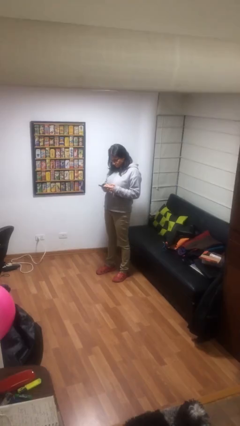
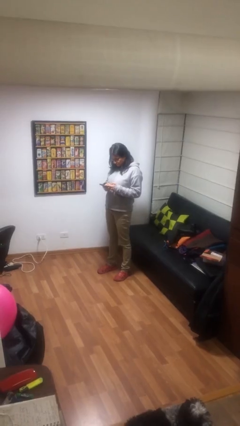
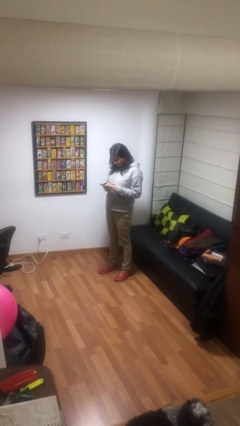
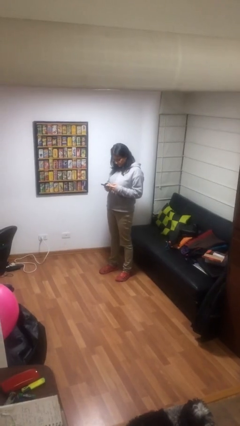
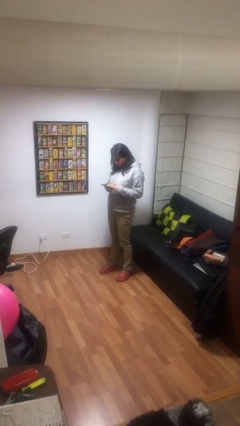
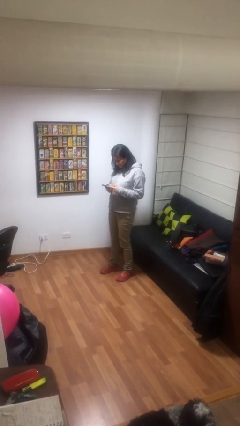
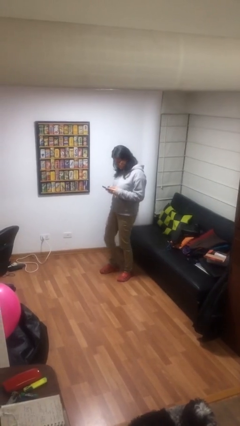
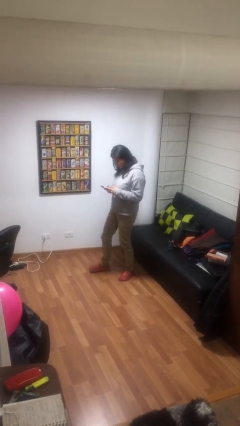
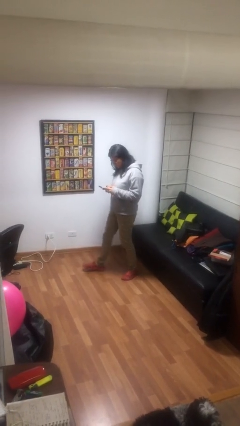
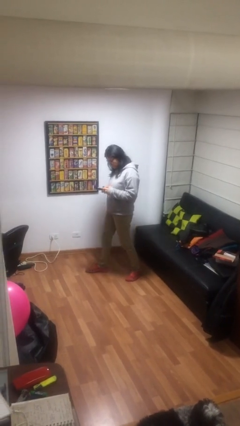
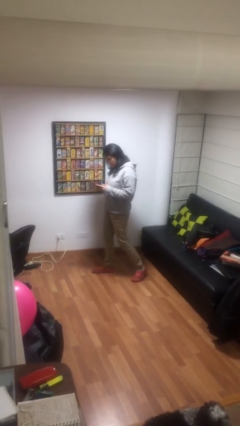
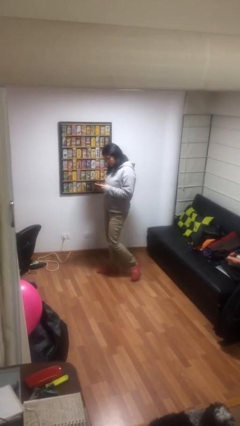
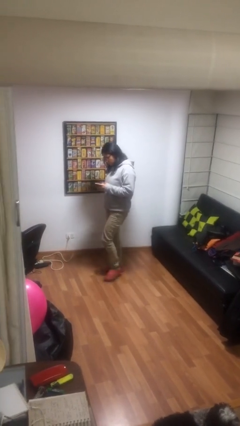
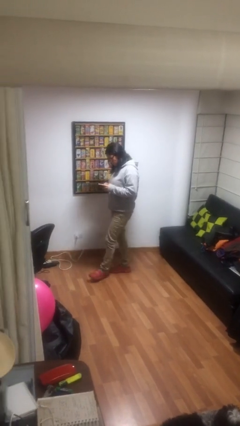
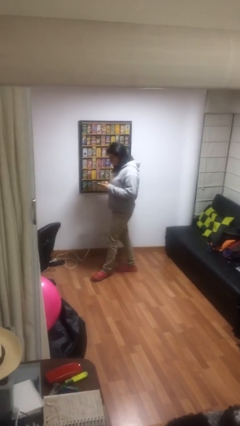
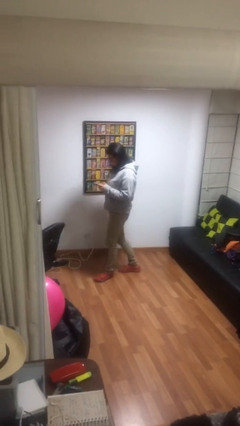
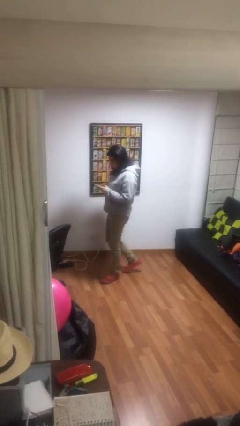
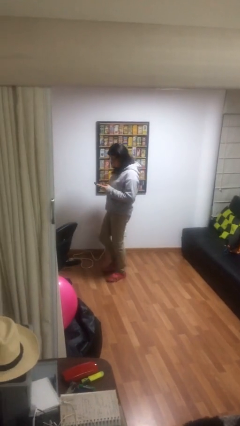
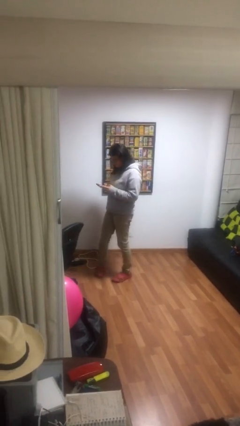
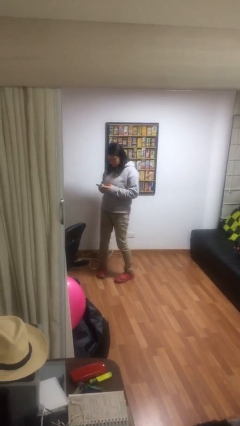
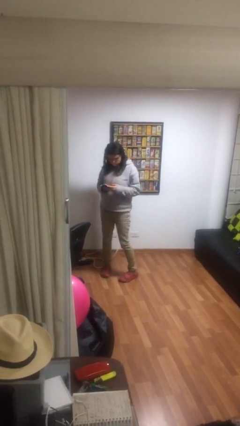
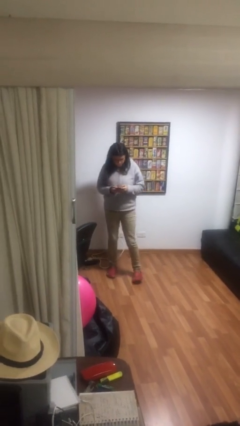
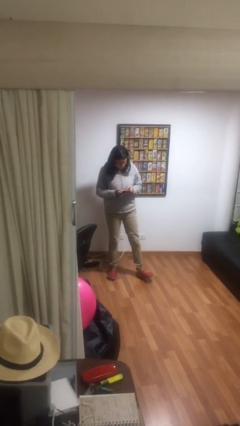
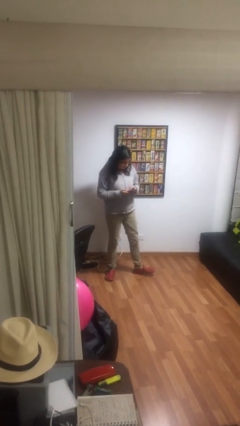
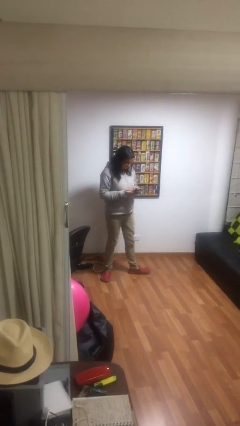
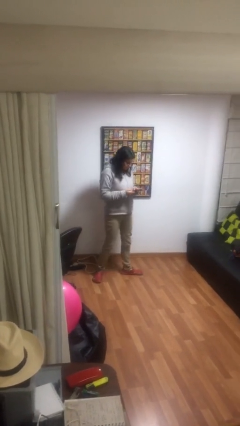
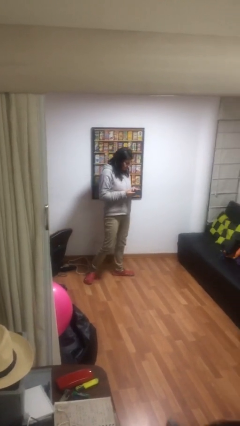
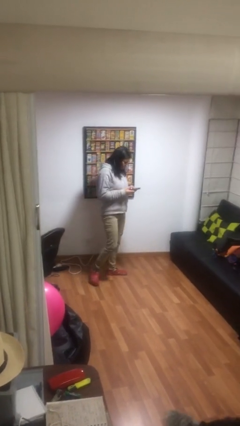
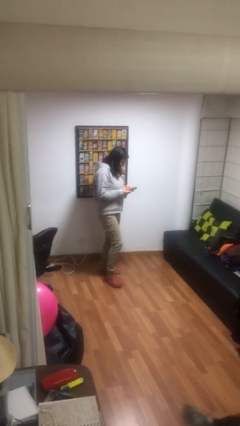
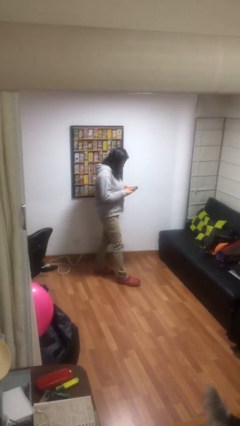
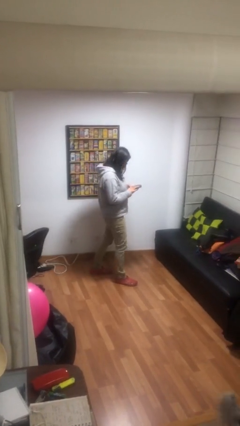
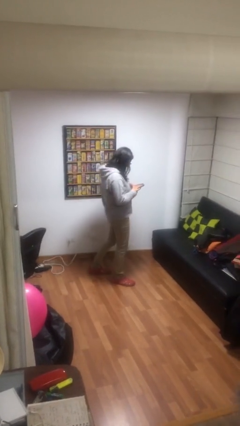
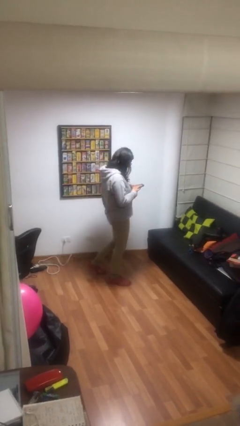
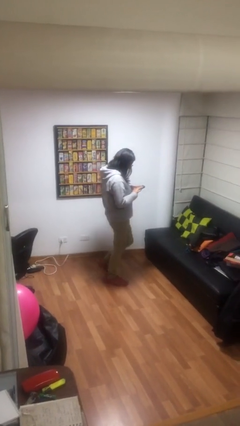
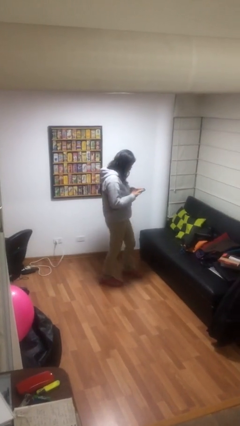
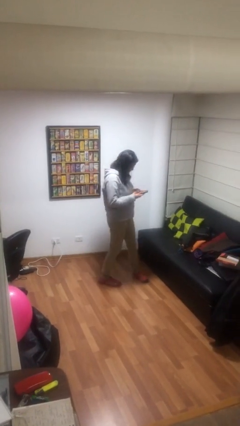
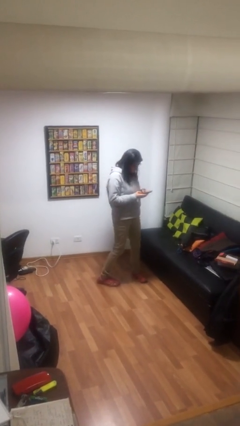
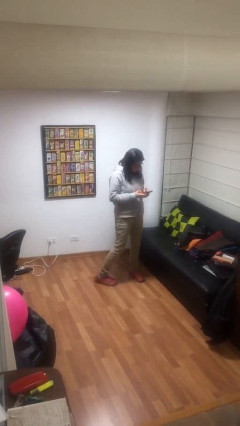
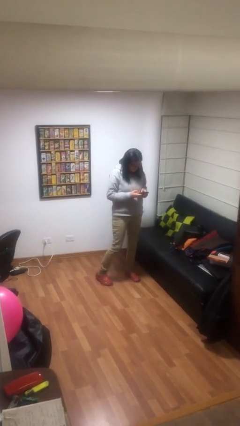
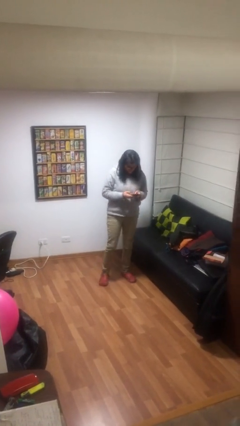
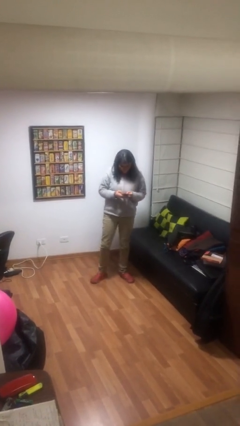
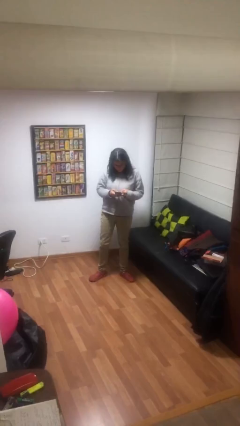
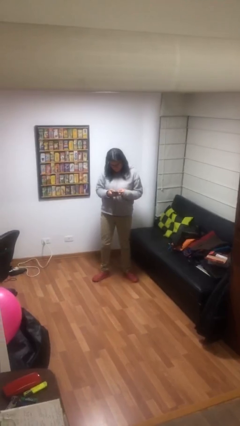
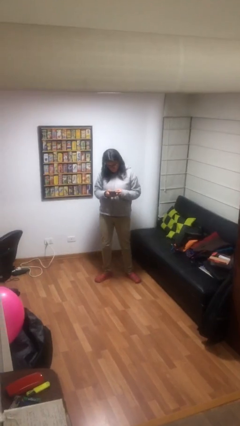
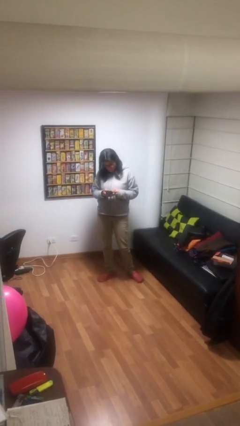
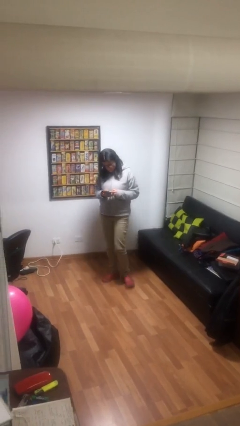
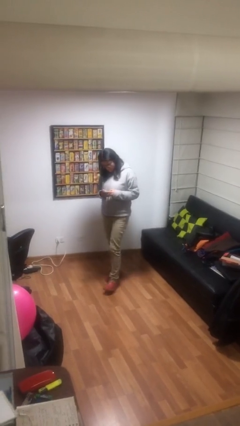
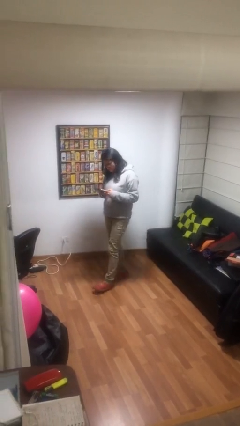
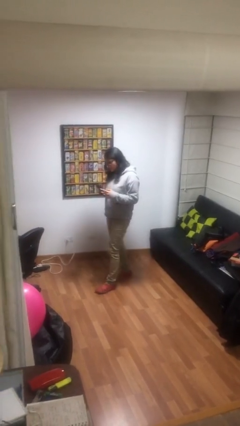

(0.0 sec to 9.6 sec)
person texts on phone

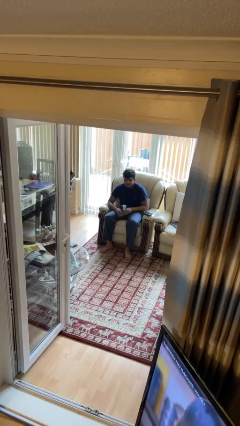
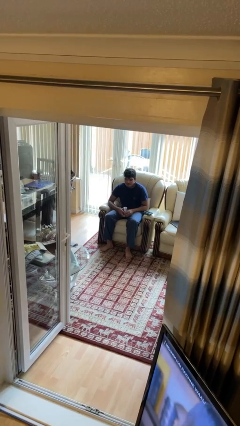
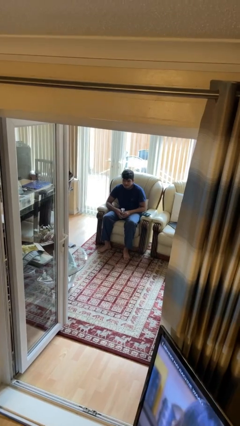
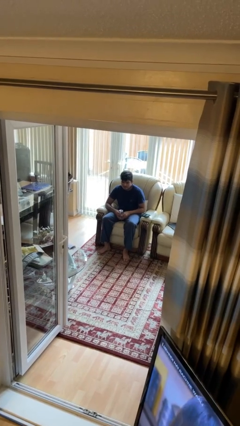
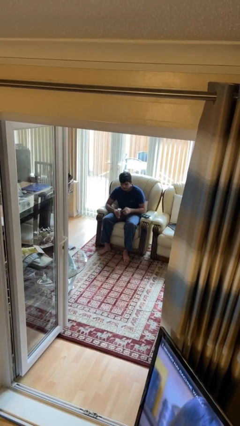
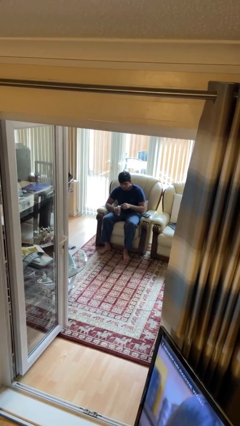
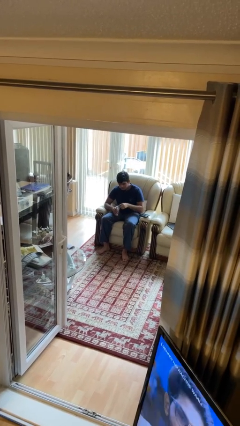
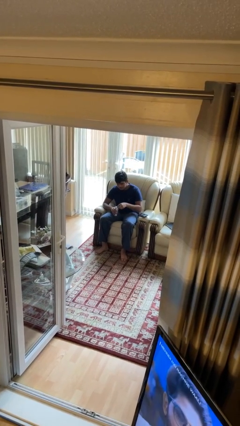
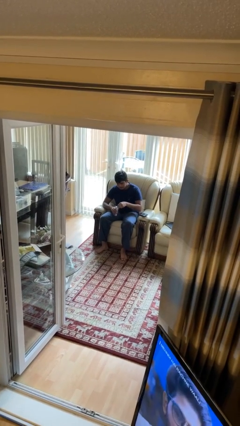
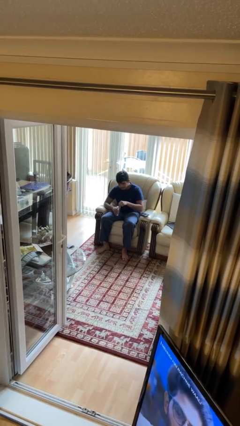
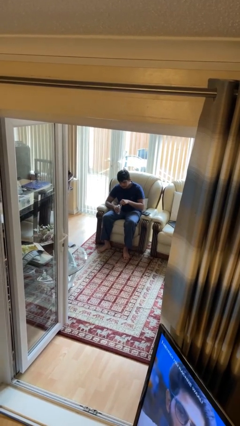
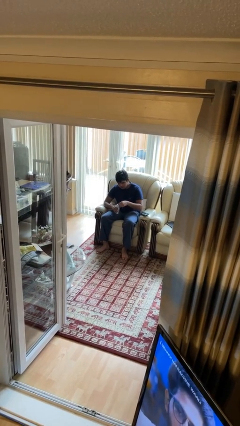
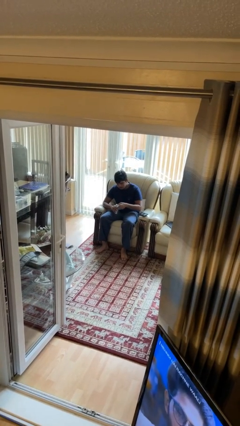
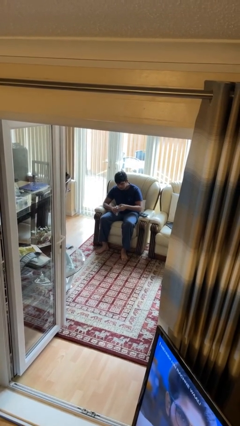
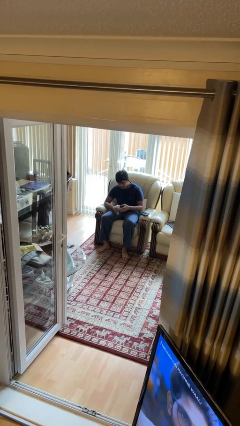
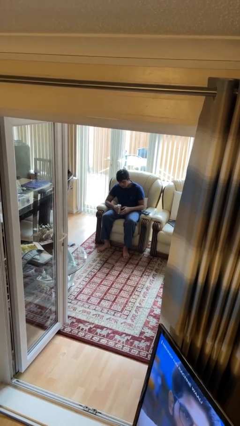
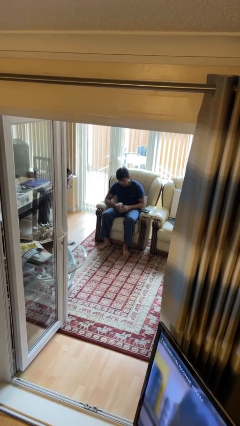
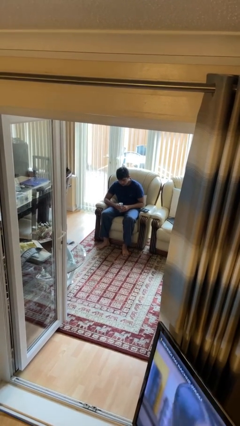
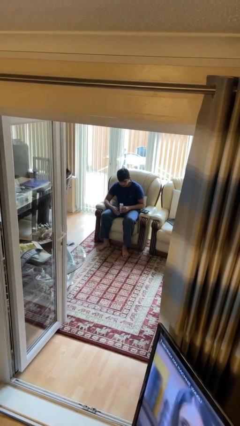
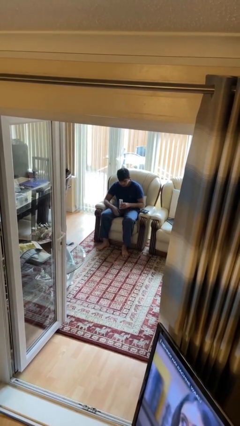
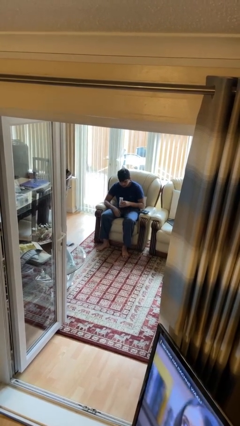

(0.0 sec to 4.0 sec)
person opens beverage can

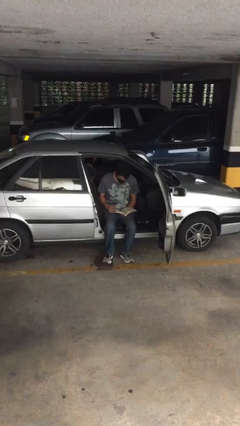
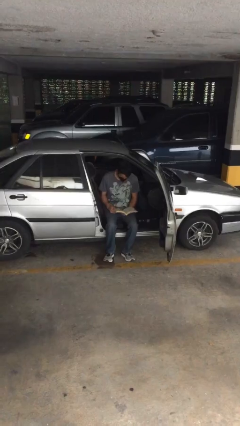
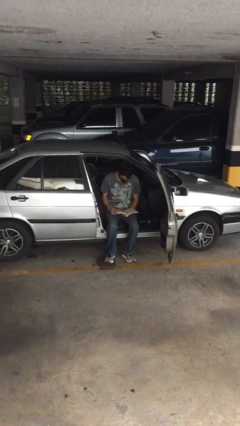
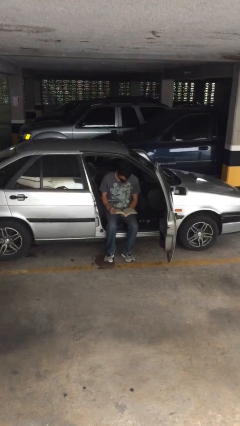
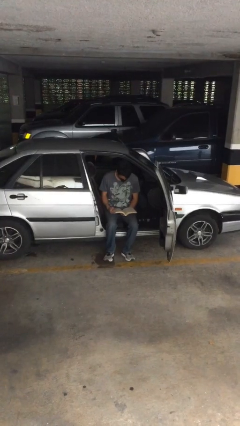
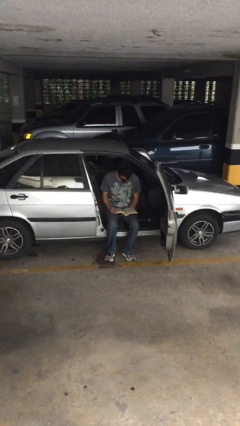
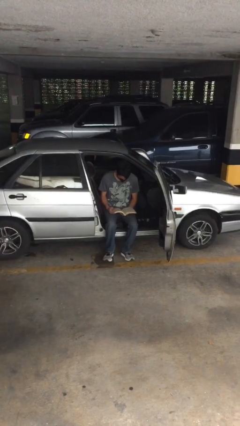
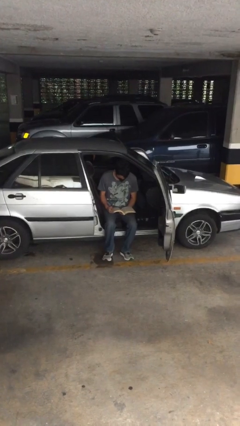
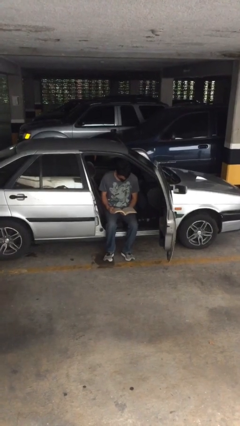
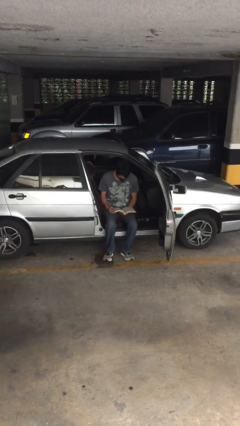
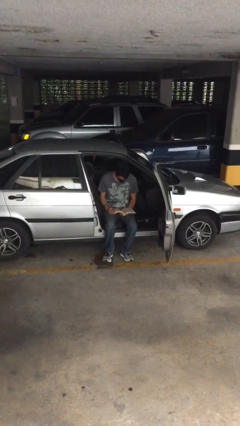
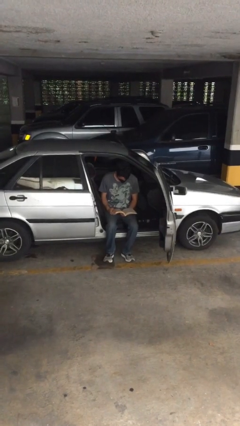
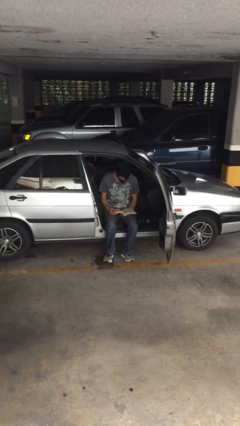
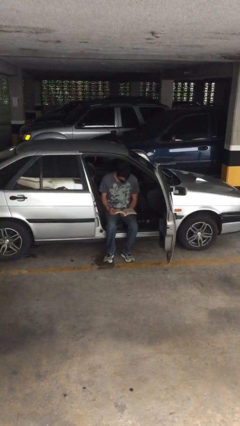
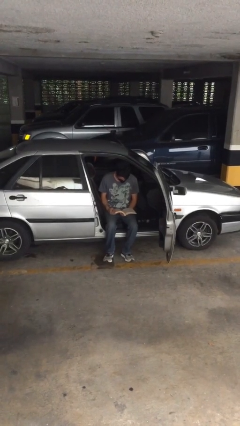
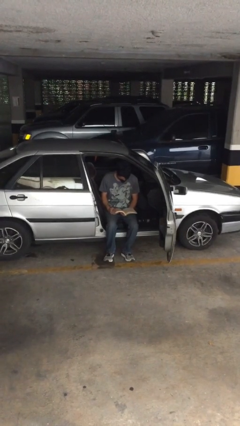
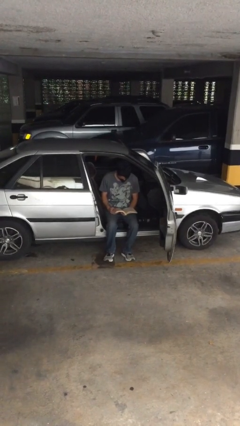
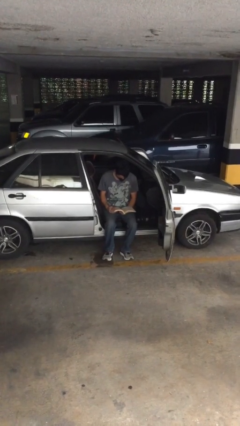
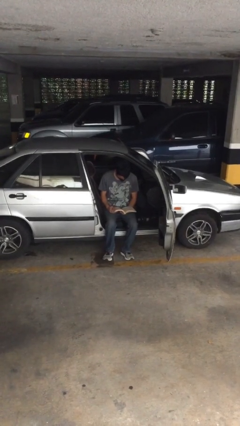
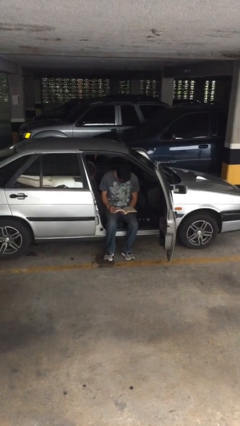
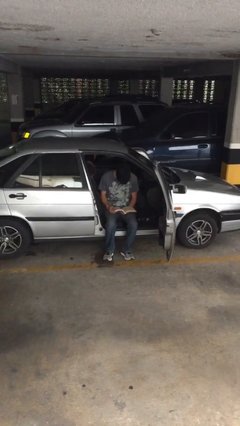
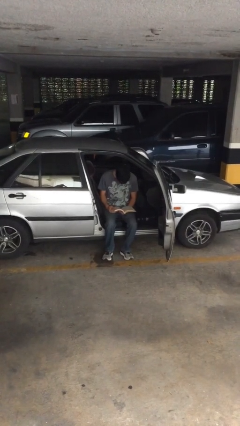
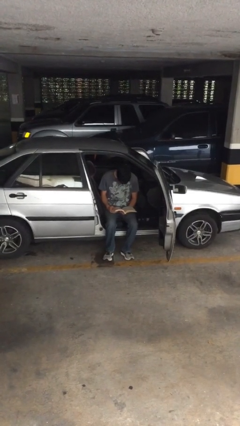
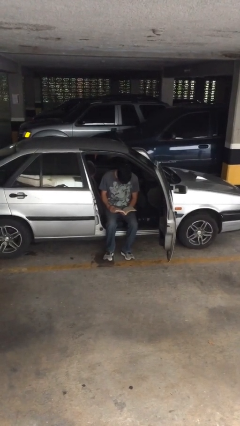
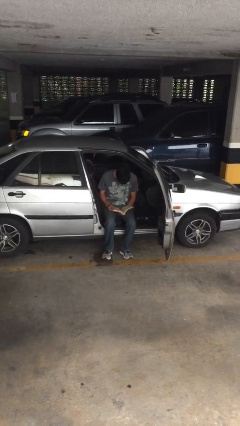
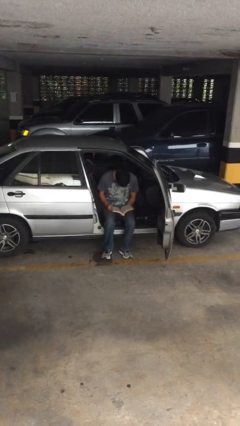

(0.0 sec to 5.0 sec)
person reads document
